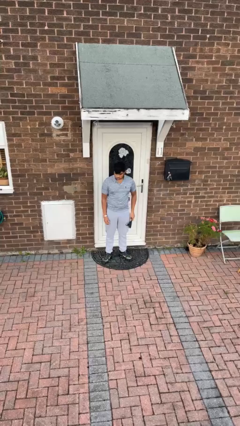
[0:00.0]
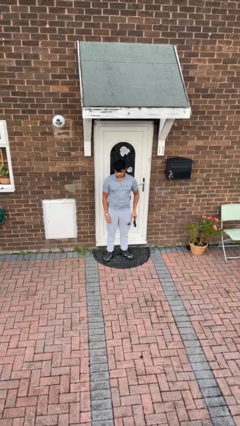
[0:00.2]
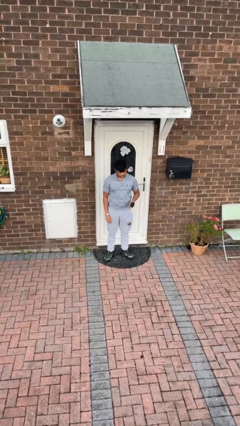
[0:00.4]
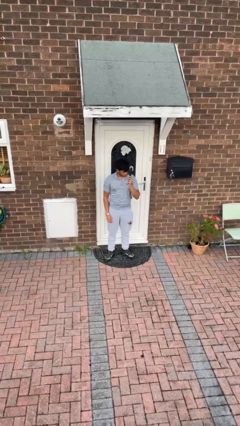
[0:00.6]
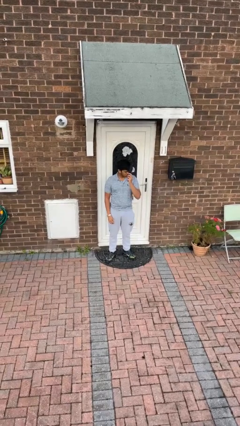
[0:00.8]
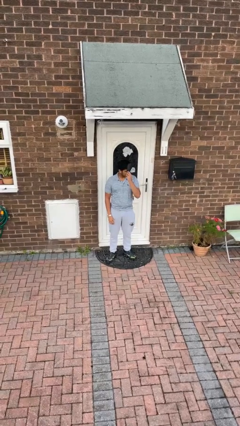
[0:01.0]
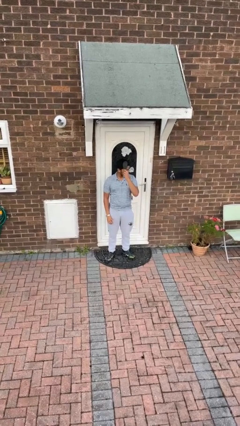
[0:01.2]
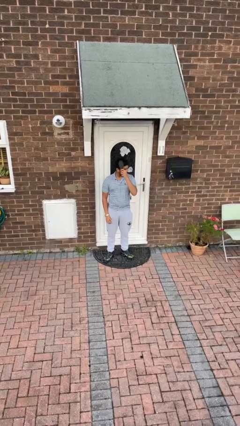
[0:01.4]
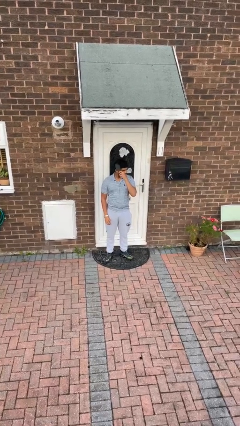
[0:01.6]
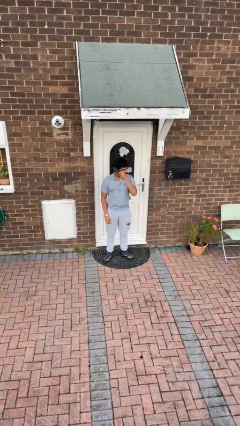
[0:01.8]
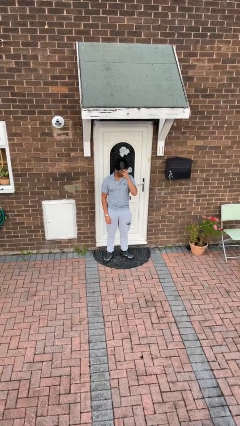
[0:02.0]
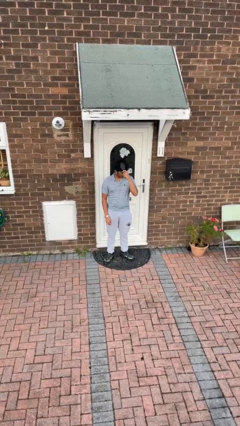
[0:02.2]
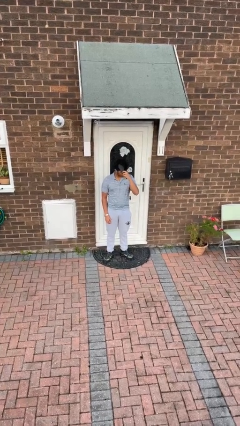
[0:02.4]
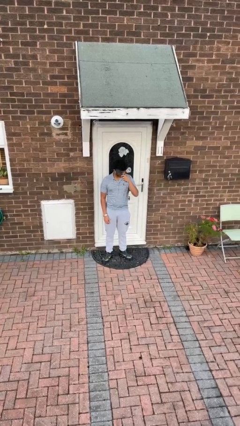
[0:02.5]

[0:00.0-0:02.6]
person brushes hair

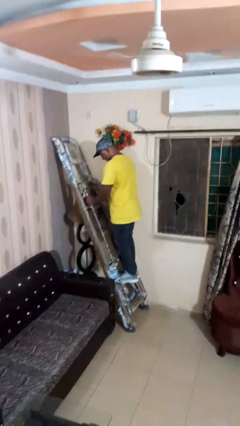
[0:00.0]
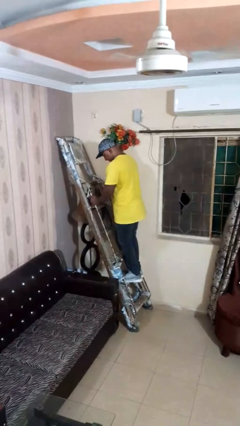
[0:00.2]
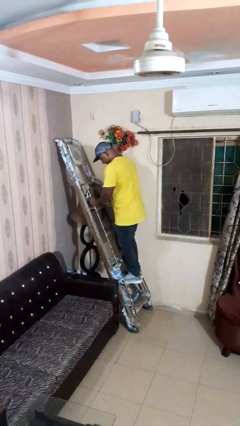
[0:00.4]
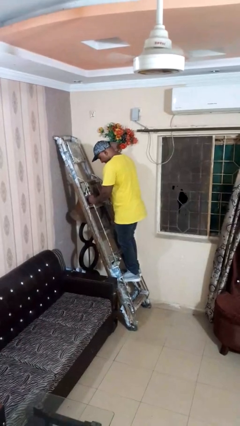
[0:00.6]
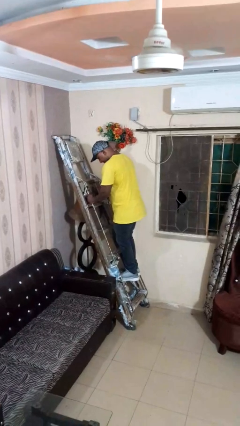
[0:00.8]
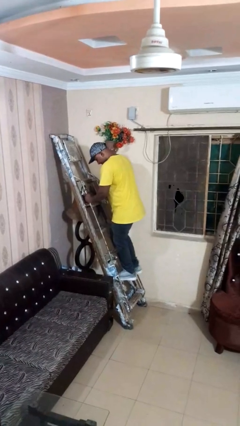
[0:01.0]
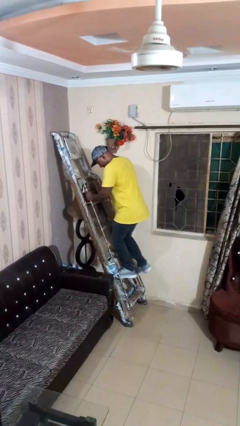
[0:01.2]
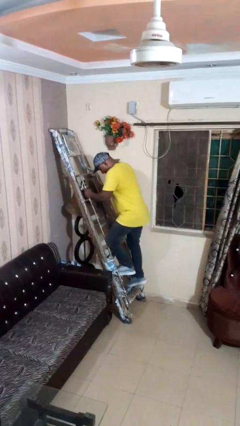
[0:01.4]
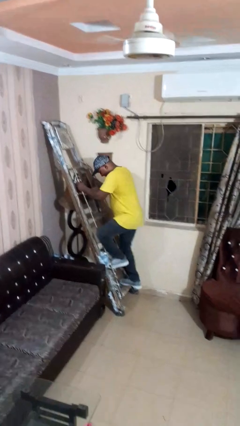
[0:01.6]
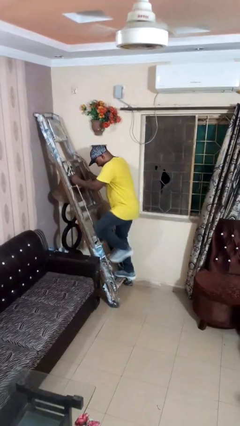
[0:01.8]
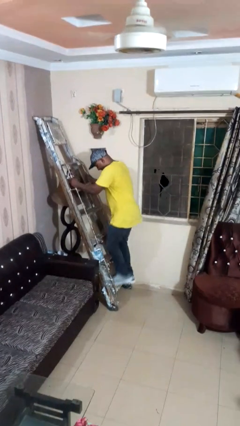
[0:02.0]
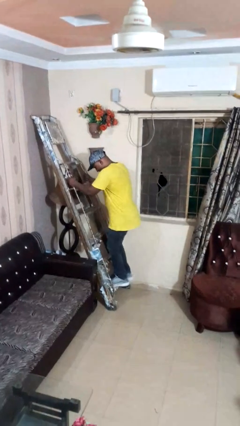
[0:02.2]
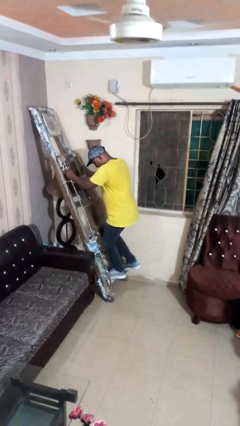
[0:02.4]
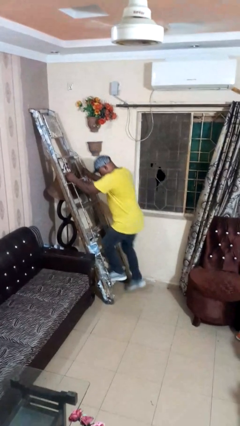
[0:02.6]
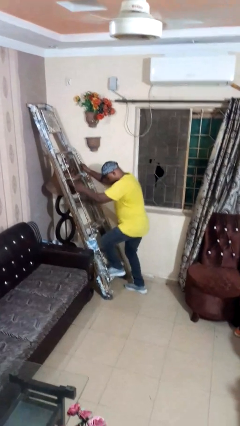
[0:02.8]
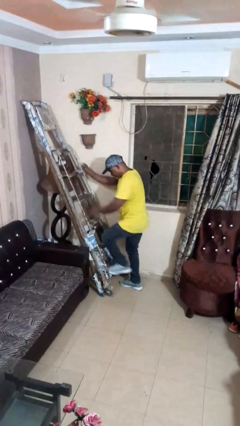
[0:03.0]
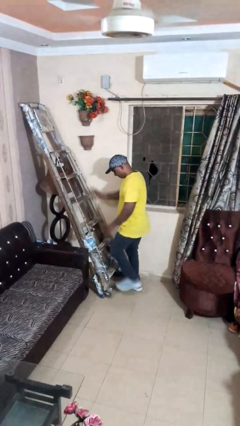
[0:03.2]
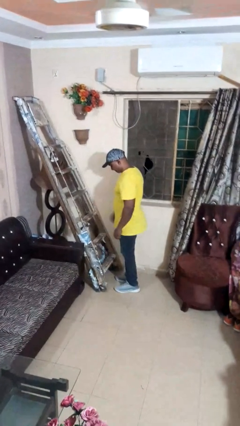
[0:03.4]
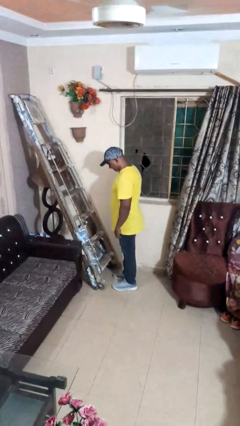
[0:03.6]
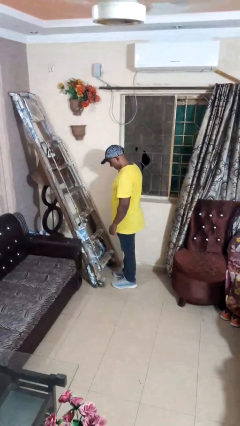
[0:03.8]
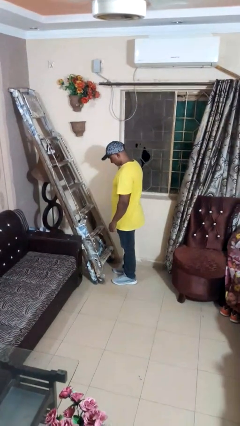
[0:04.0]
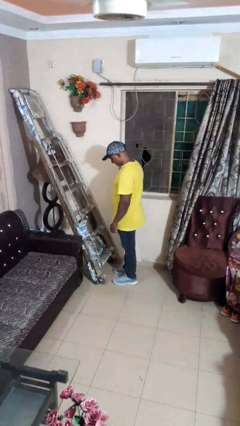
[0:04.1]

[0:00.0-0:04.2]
person climbs down ladder

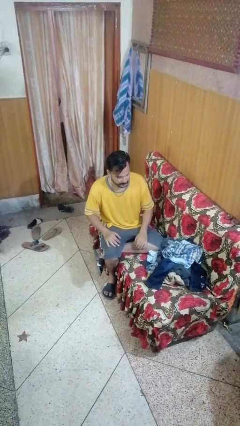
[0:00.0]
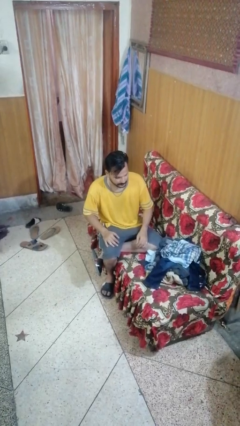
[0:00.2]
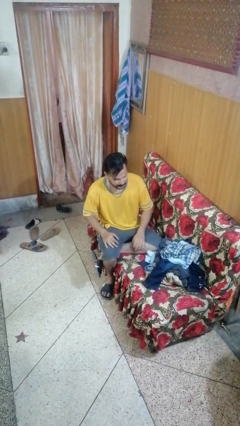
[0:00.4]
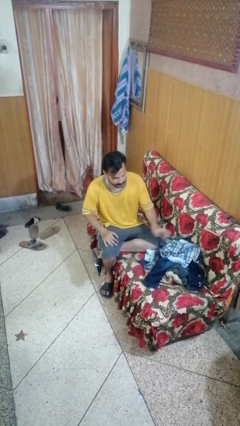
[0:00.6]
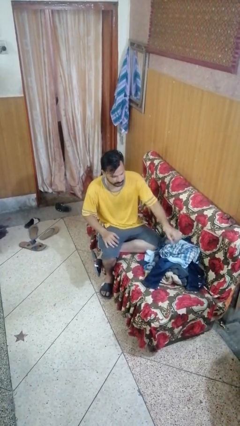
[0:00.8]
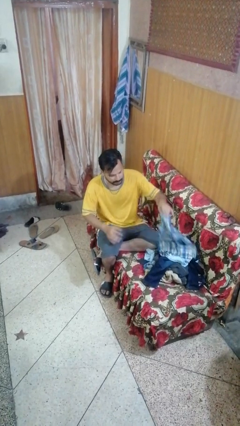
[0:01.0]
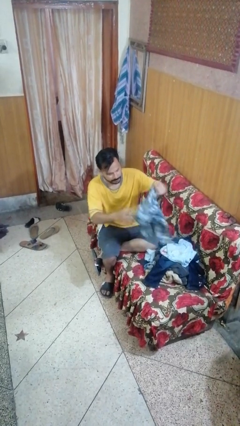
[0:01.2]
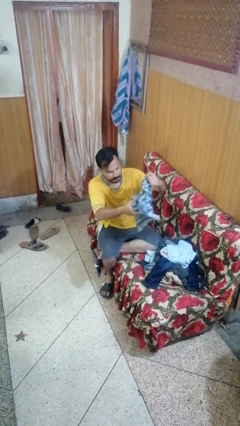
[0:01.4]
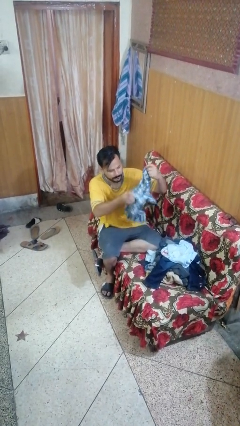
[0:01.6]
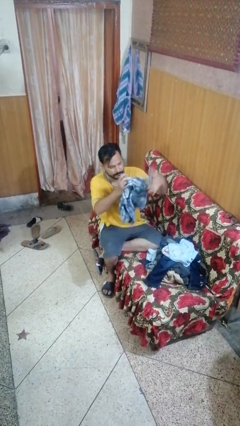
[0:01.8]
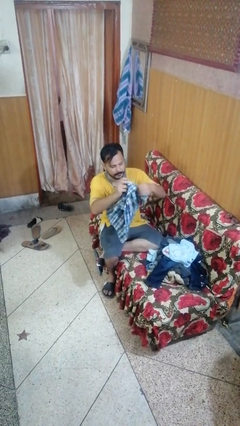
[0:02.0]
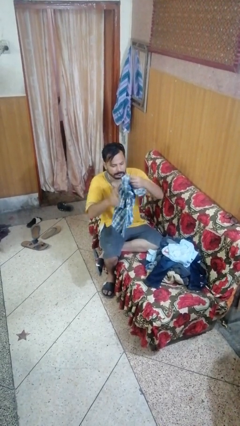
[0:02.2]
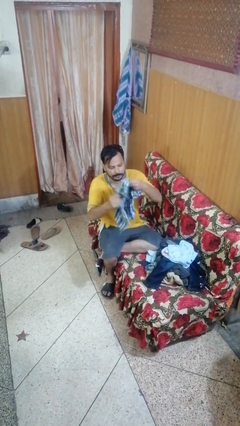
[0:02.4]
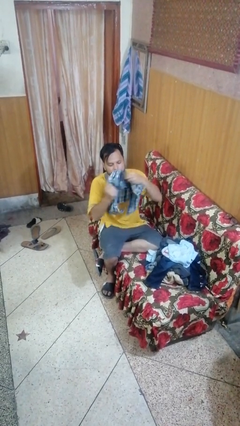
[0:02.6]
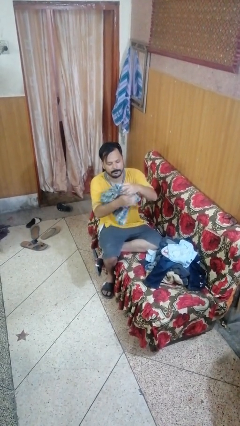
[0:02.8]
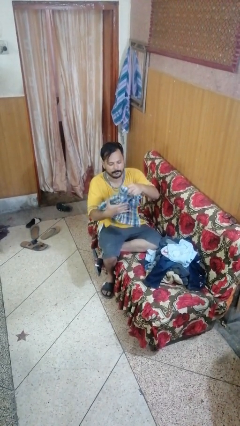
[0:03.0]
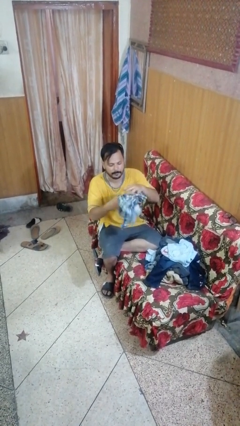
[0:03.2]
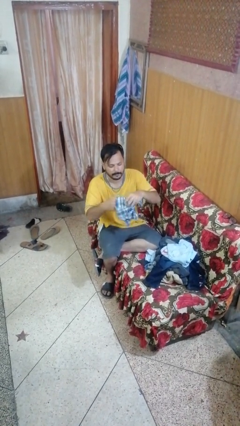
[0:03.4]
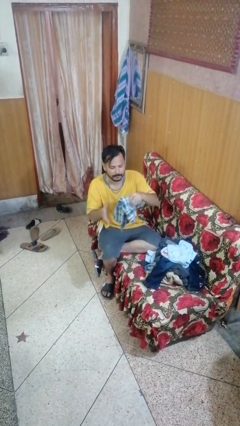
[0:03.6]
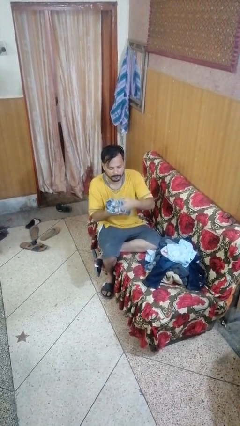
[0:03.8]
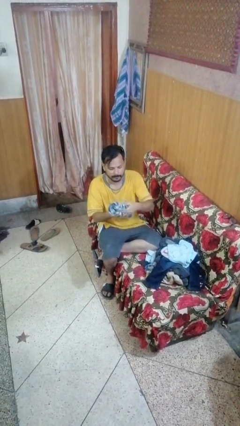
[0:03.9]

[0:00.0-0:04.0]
person folds shirt

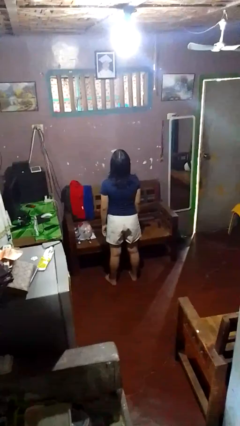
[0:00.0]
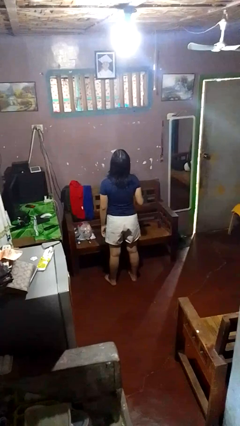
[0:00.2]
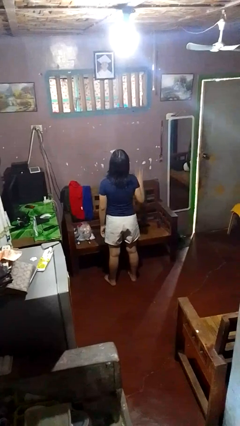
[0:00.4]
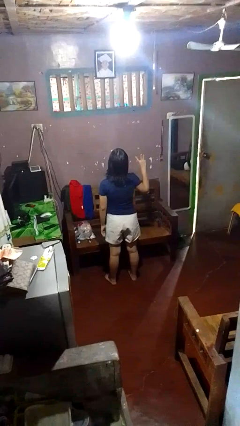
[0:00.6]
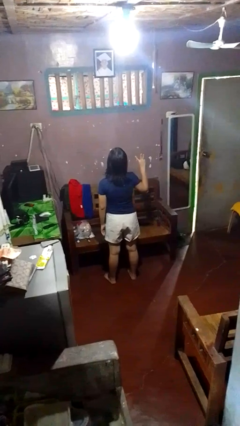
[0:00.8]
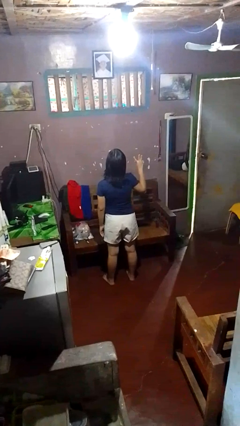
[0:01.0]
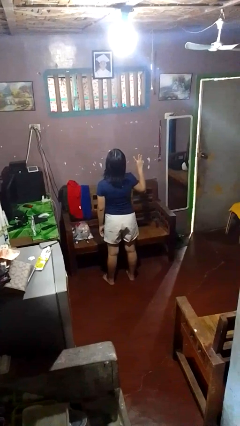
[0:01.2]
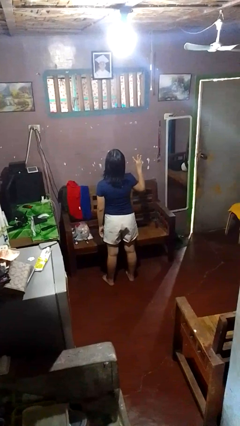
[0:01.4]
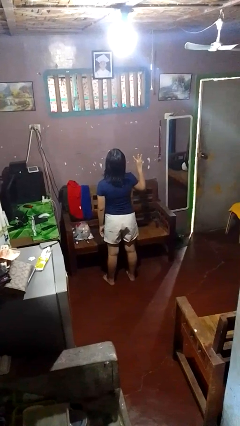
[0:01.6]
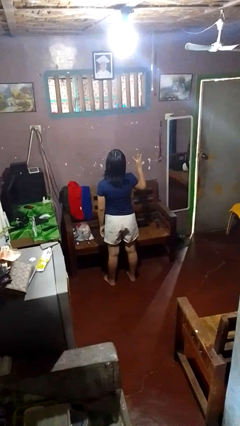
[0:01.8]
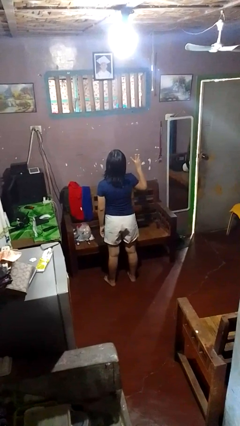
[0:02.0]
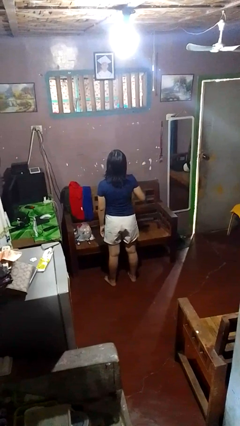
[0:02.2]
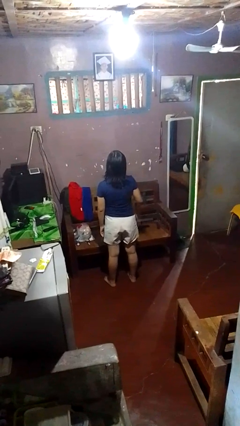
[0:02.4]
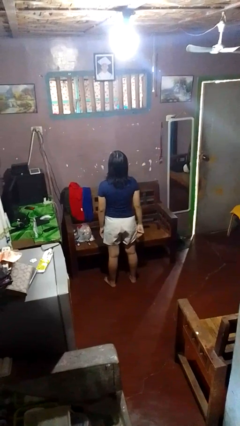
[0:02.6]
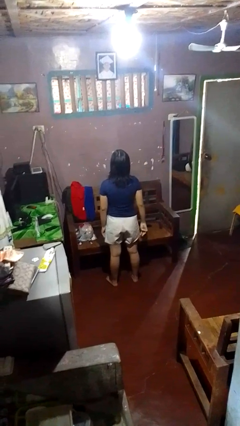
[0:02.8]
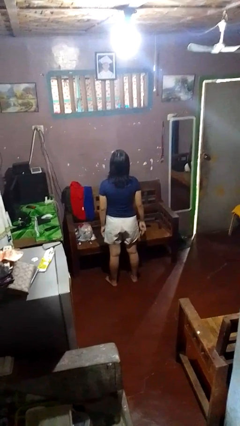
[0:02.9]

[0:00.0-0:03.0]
person gestures number three

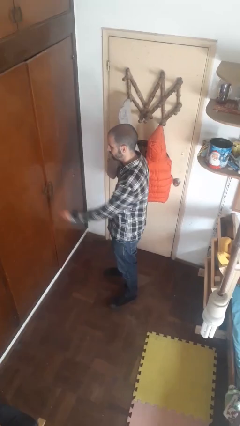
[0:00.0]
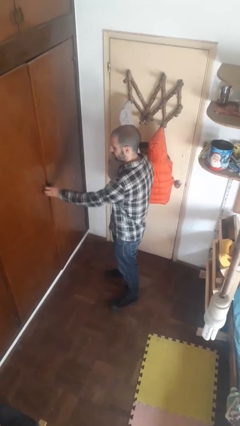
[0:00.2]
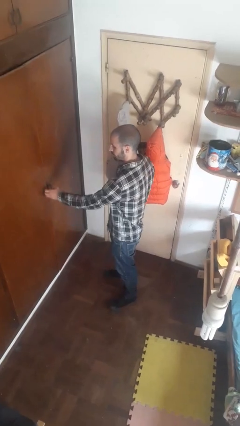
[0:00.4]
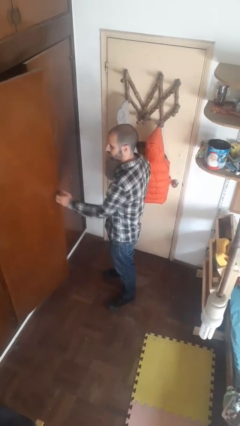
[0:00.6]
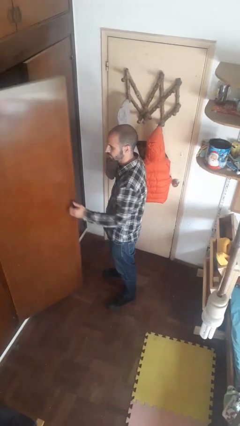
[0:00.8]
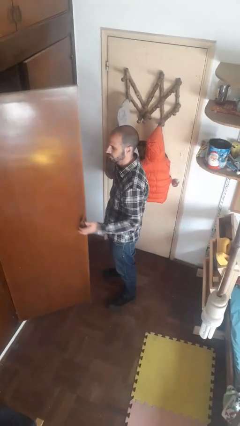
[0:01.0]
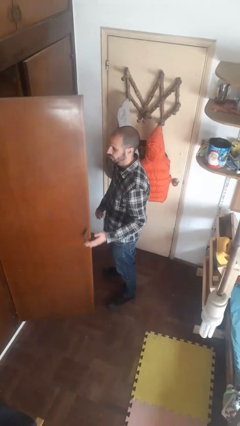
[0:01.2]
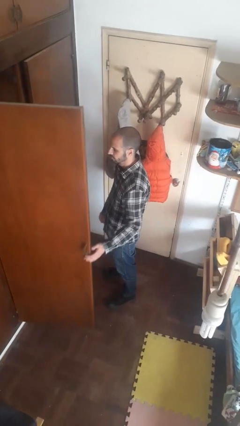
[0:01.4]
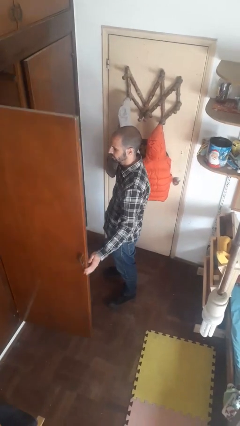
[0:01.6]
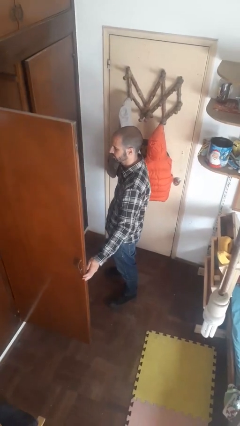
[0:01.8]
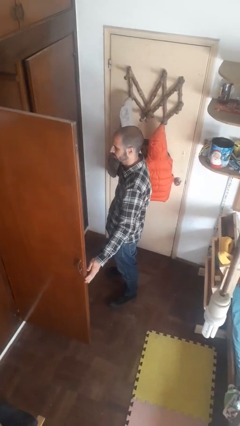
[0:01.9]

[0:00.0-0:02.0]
person opens closet door

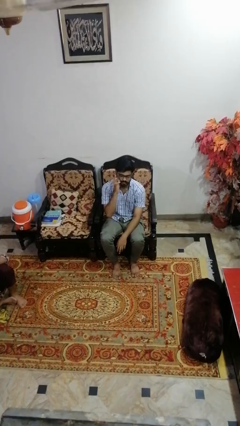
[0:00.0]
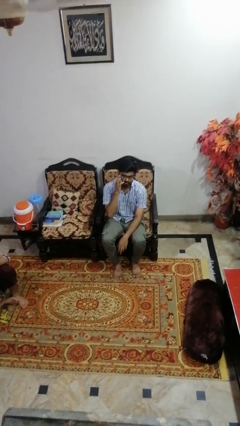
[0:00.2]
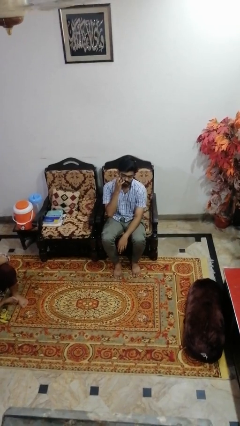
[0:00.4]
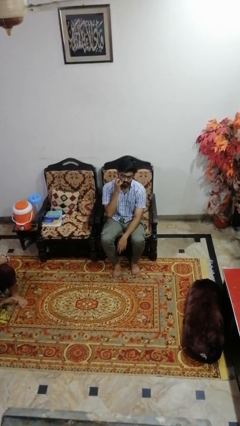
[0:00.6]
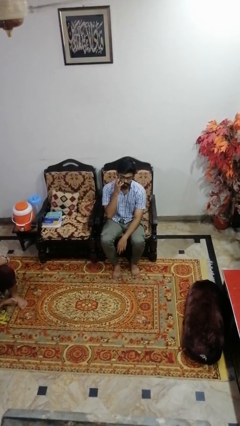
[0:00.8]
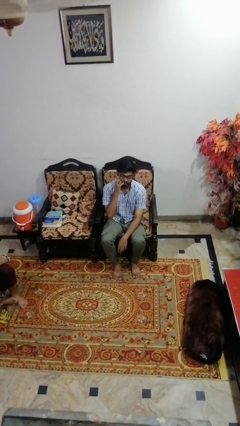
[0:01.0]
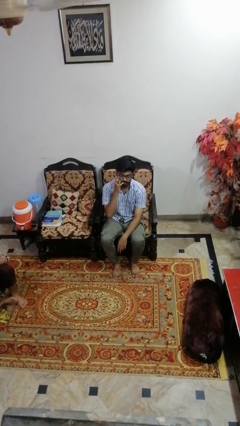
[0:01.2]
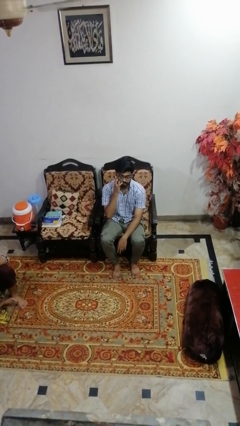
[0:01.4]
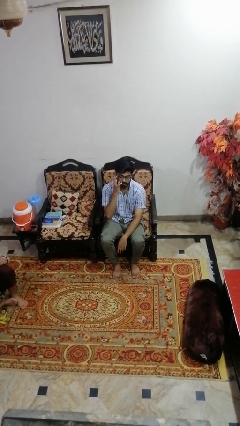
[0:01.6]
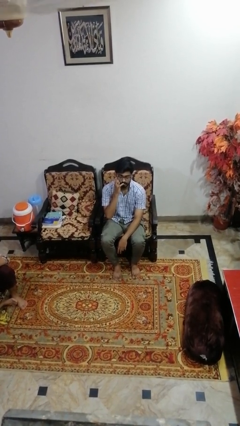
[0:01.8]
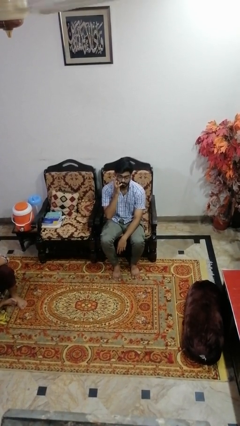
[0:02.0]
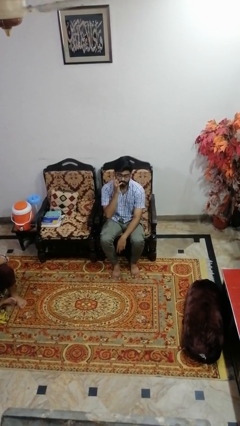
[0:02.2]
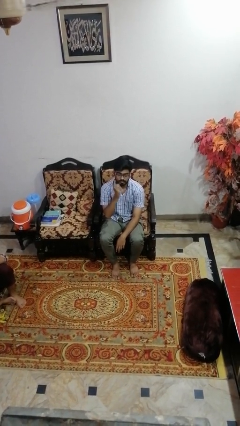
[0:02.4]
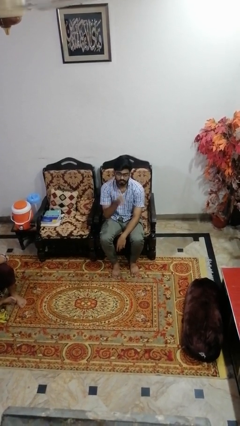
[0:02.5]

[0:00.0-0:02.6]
person scratches face
